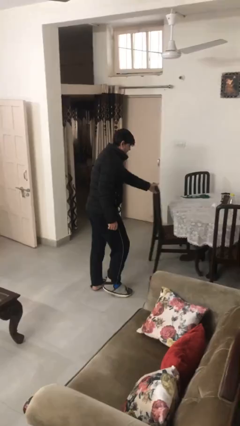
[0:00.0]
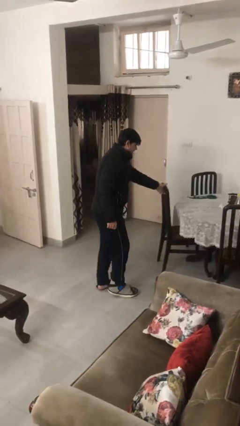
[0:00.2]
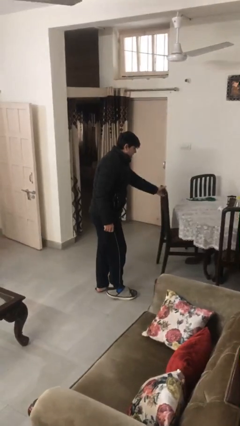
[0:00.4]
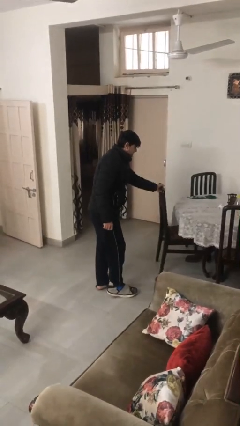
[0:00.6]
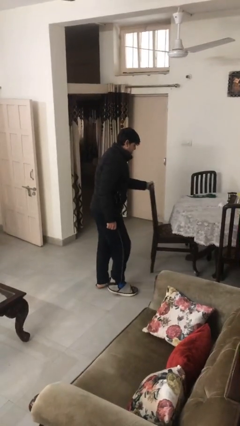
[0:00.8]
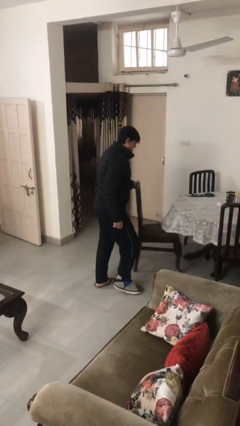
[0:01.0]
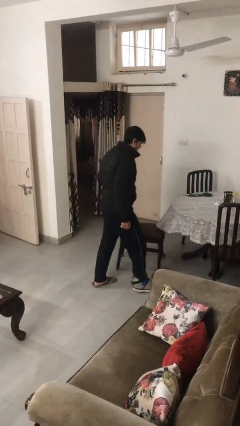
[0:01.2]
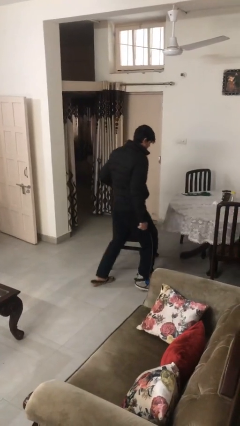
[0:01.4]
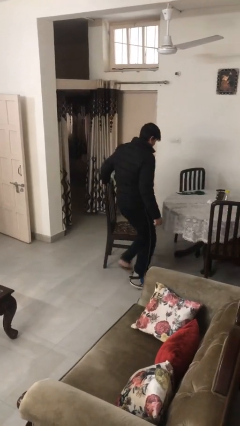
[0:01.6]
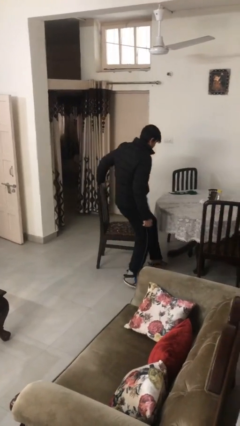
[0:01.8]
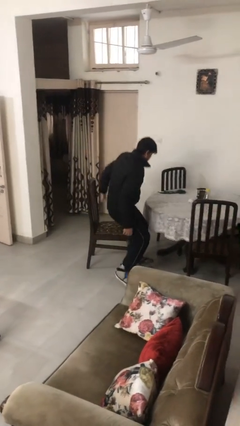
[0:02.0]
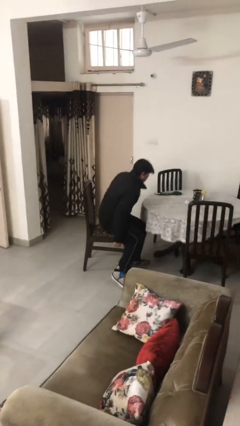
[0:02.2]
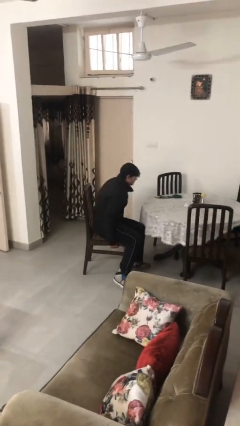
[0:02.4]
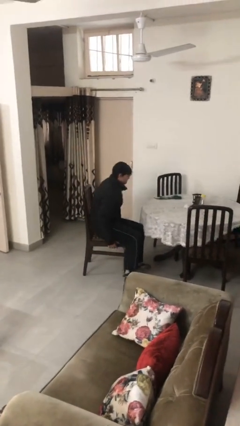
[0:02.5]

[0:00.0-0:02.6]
person sits down

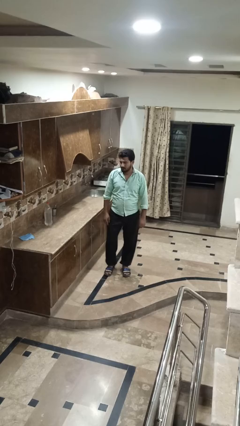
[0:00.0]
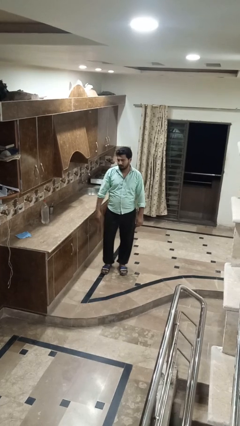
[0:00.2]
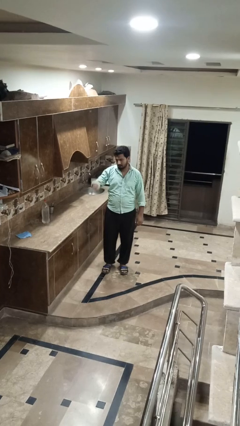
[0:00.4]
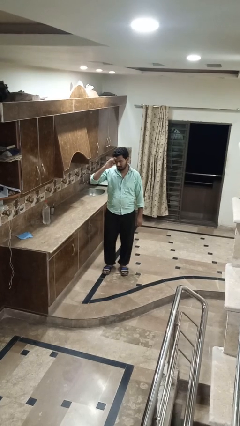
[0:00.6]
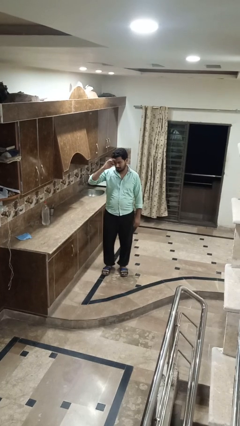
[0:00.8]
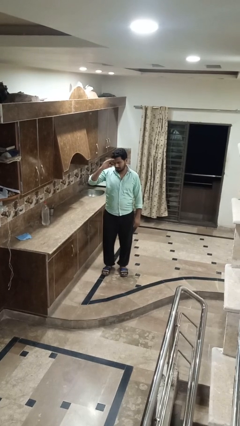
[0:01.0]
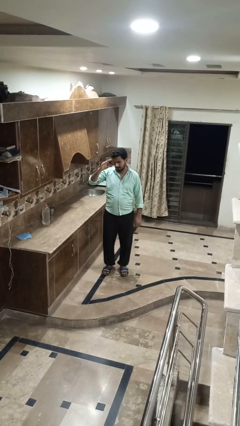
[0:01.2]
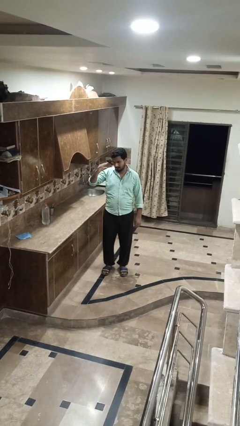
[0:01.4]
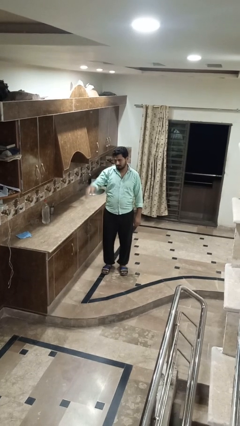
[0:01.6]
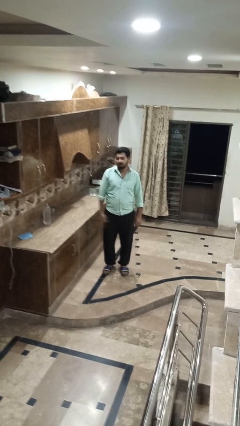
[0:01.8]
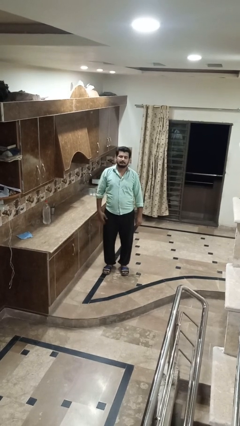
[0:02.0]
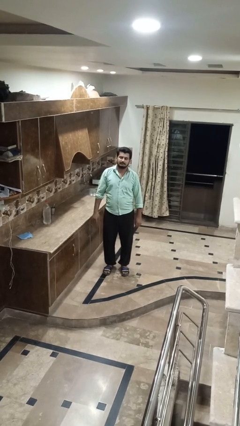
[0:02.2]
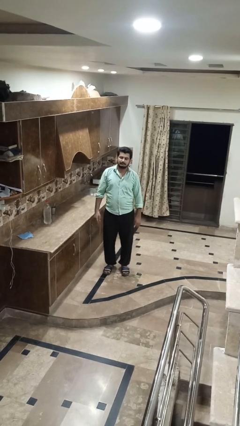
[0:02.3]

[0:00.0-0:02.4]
person salutes

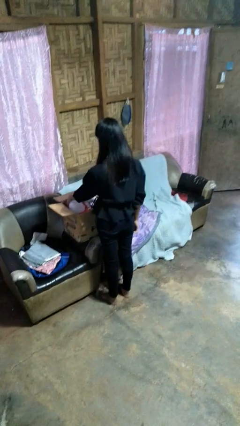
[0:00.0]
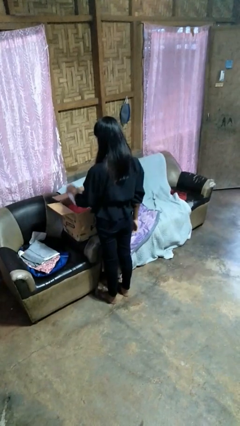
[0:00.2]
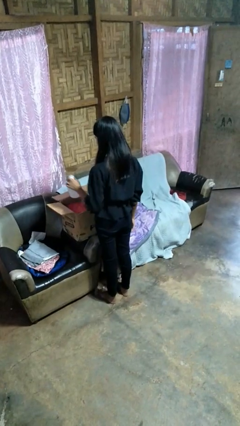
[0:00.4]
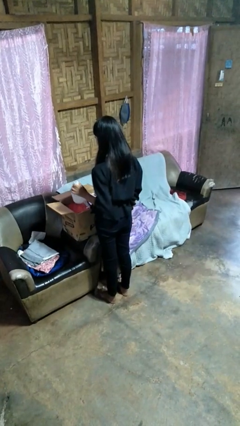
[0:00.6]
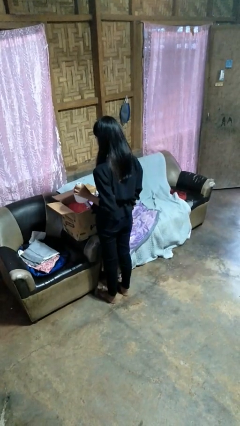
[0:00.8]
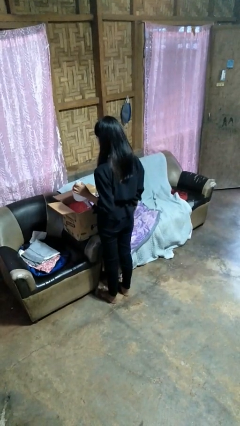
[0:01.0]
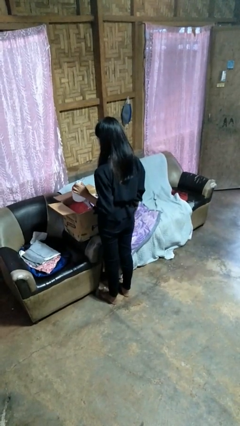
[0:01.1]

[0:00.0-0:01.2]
person takes object from box

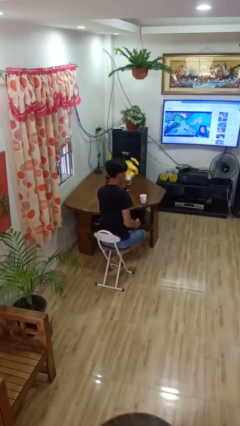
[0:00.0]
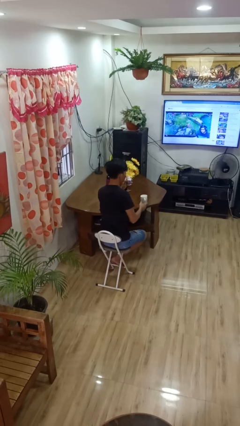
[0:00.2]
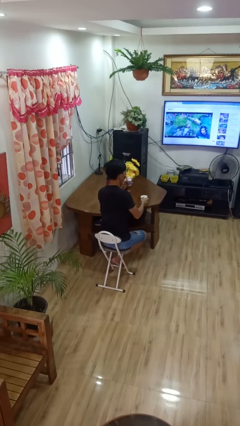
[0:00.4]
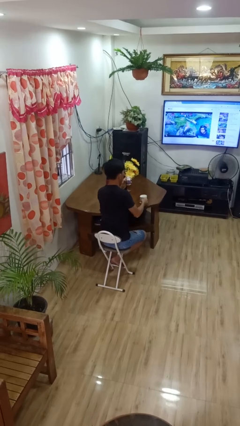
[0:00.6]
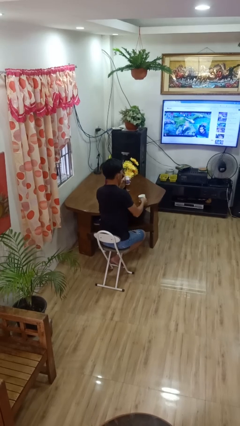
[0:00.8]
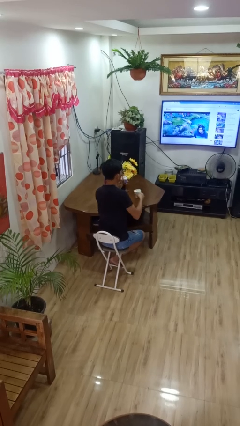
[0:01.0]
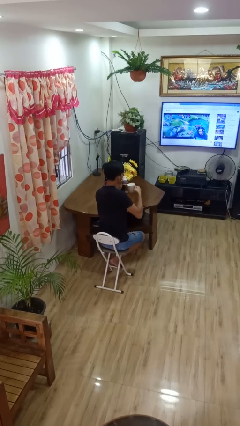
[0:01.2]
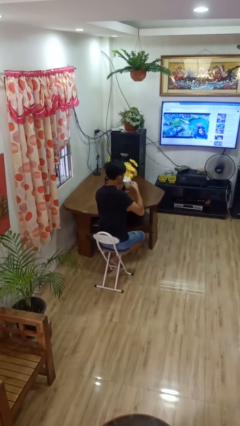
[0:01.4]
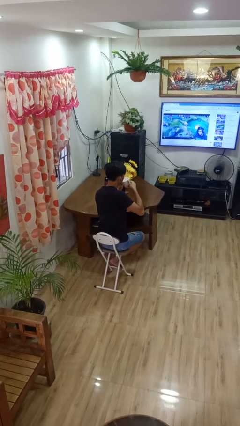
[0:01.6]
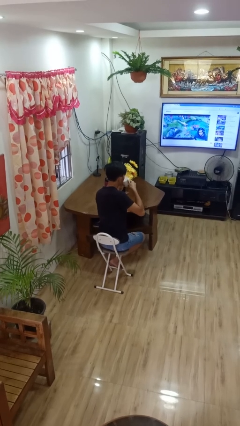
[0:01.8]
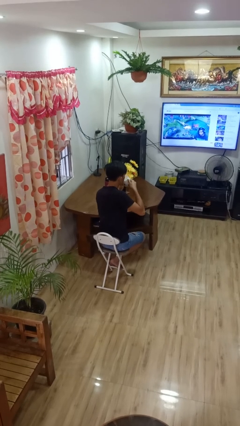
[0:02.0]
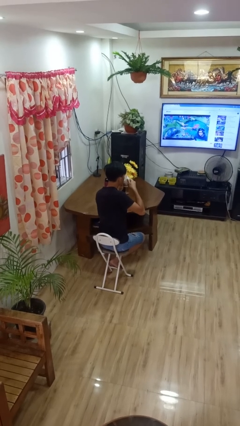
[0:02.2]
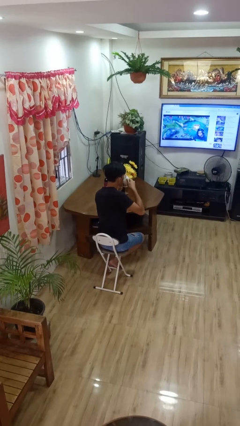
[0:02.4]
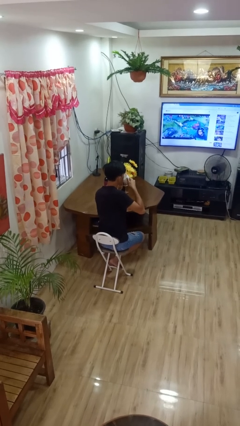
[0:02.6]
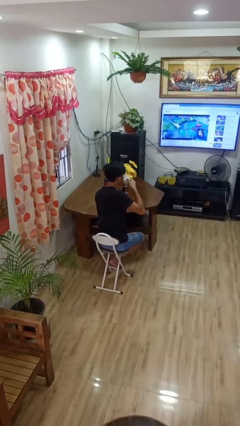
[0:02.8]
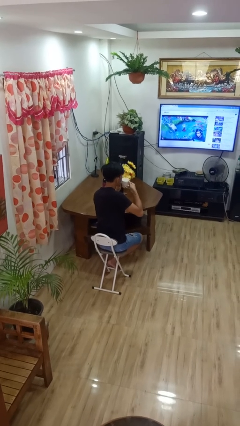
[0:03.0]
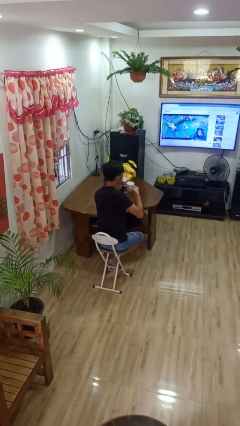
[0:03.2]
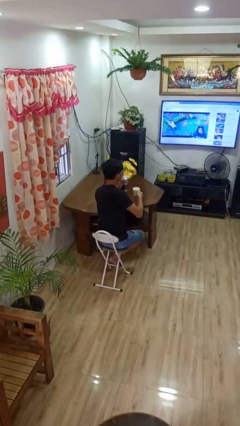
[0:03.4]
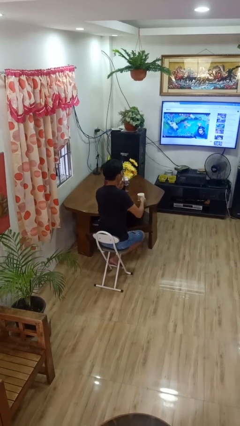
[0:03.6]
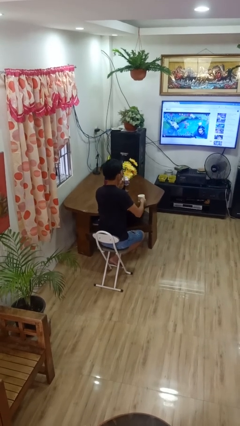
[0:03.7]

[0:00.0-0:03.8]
person drinks from cup

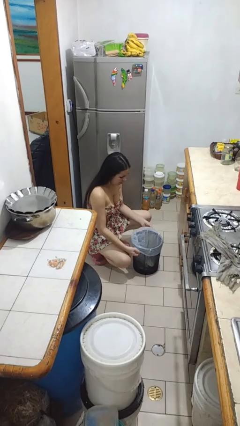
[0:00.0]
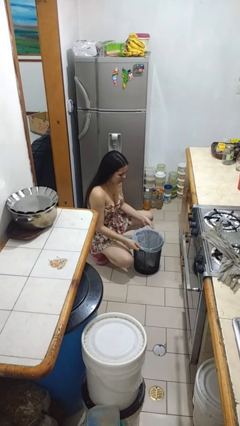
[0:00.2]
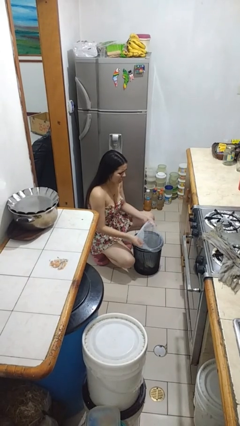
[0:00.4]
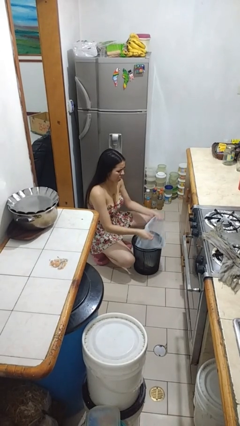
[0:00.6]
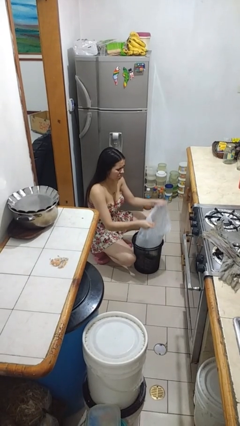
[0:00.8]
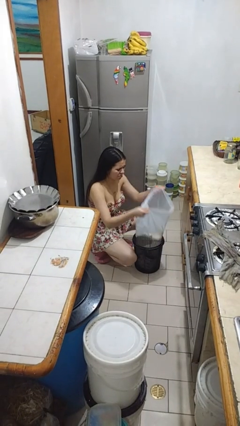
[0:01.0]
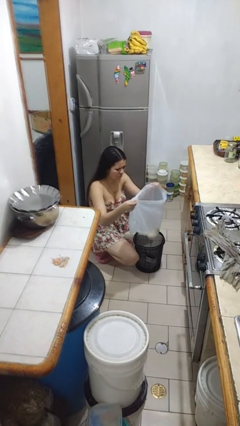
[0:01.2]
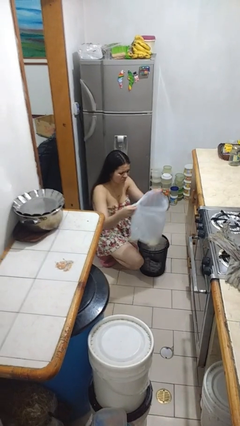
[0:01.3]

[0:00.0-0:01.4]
person removes trashbag from trashcan

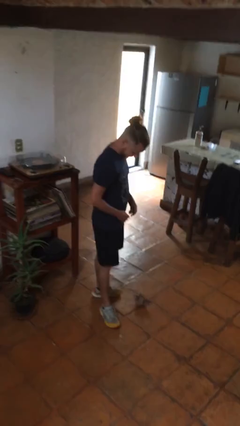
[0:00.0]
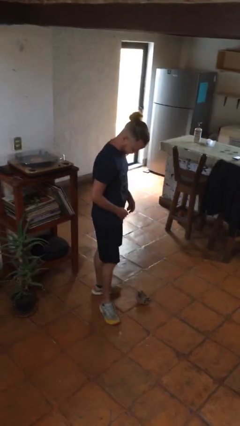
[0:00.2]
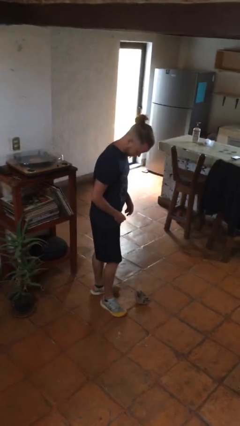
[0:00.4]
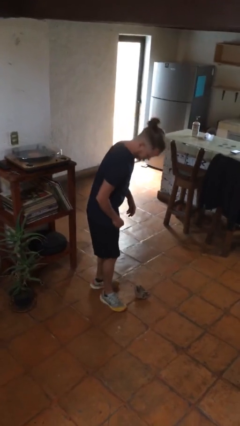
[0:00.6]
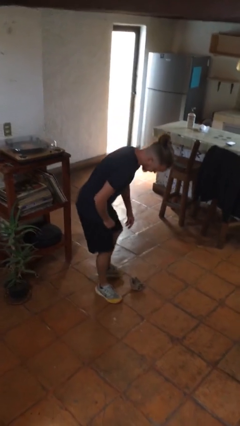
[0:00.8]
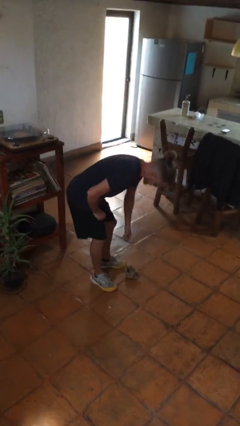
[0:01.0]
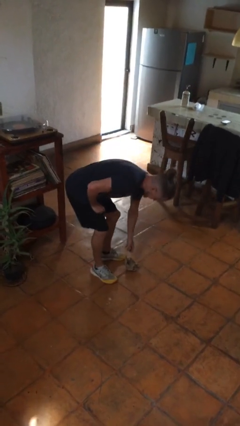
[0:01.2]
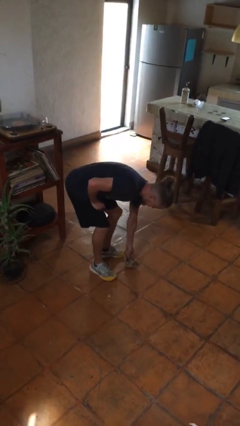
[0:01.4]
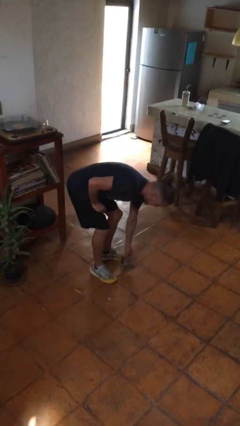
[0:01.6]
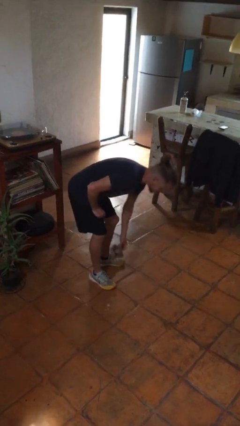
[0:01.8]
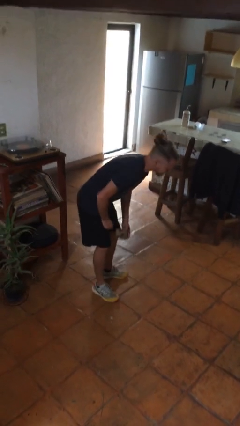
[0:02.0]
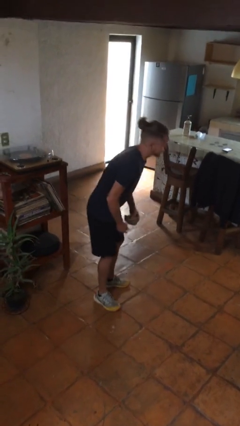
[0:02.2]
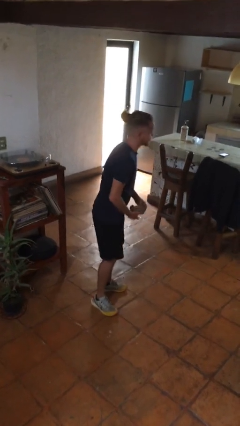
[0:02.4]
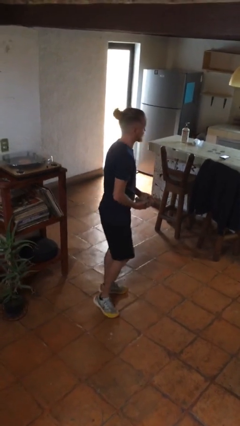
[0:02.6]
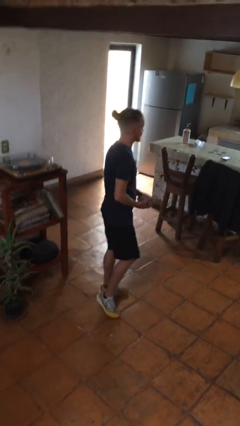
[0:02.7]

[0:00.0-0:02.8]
person picks up object from floor

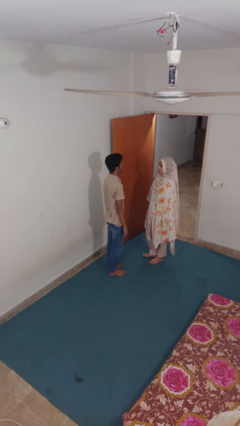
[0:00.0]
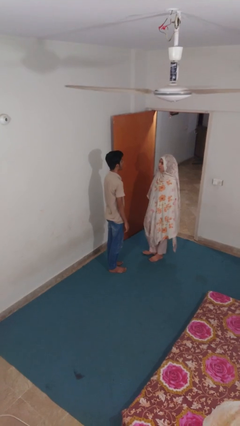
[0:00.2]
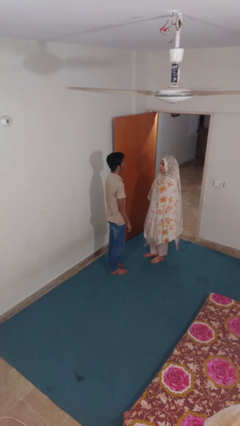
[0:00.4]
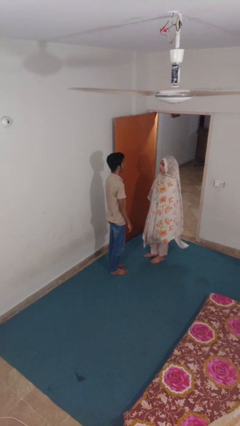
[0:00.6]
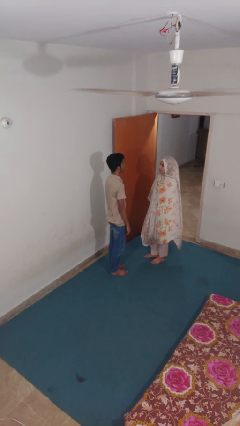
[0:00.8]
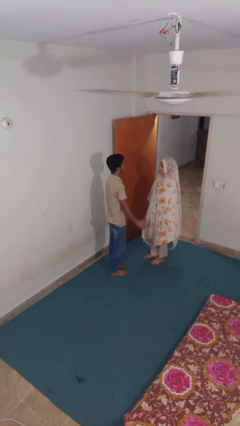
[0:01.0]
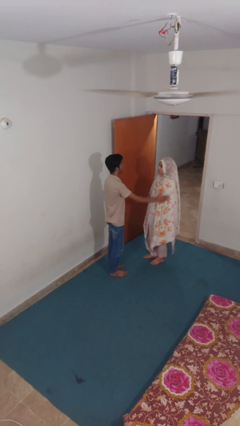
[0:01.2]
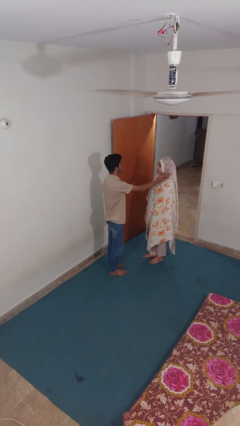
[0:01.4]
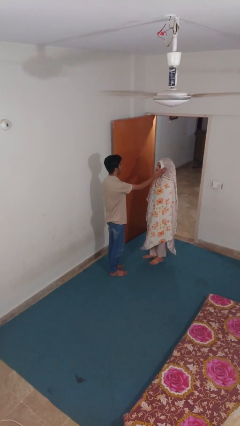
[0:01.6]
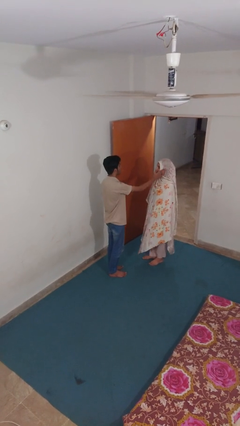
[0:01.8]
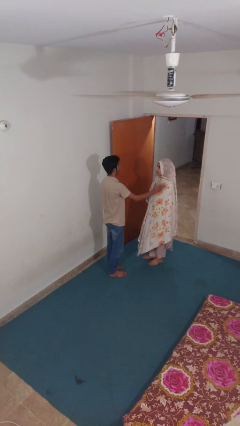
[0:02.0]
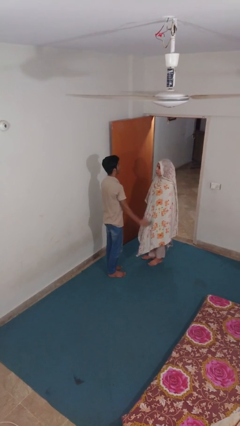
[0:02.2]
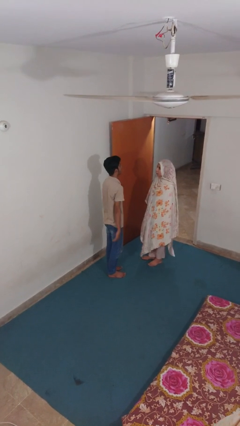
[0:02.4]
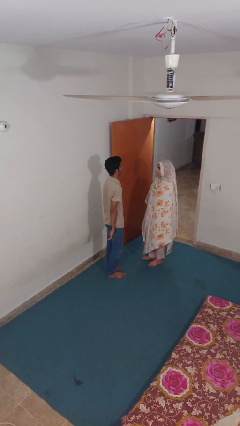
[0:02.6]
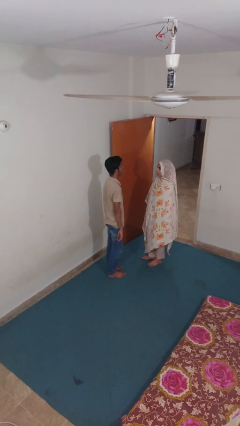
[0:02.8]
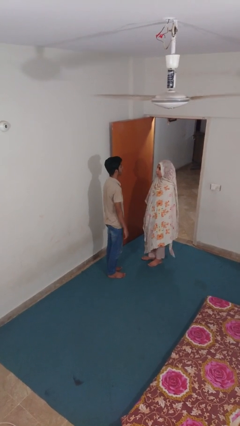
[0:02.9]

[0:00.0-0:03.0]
person touches face of person
